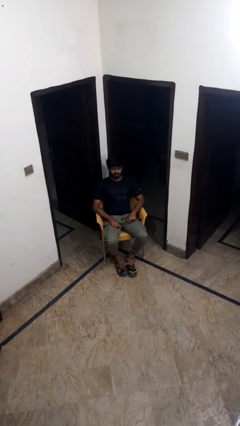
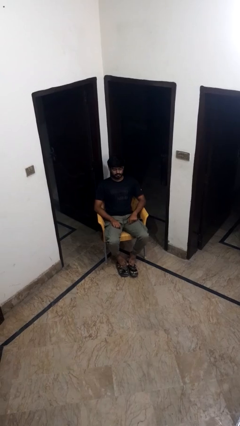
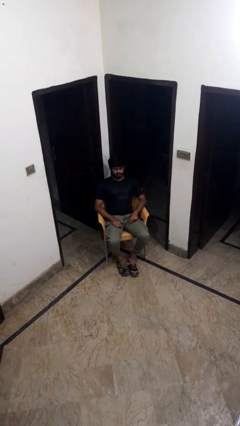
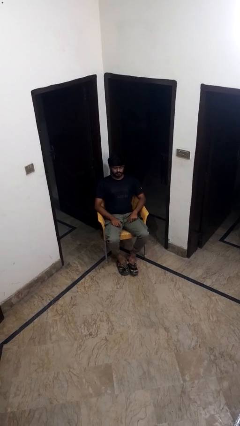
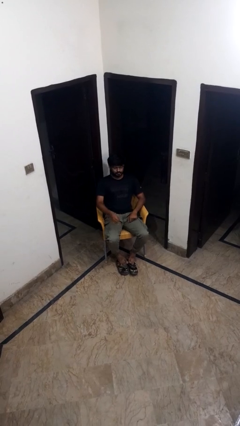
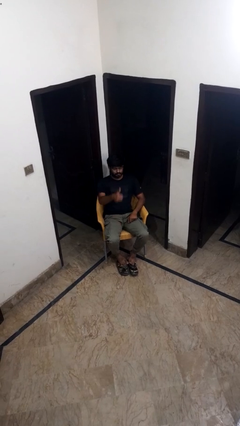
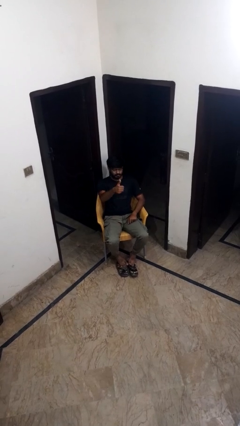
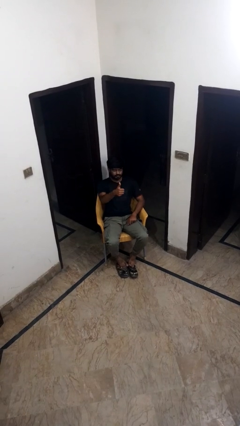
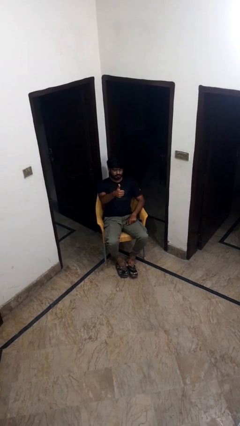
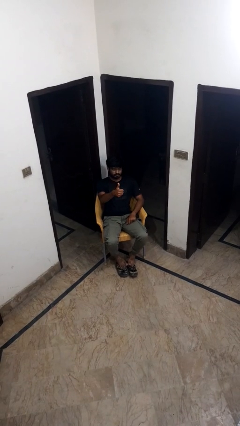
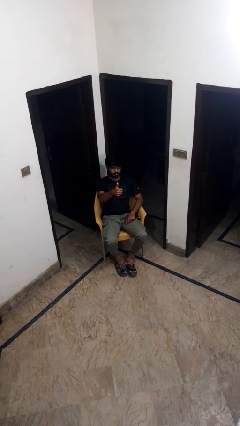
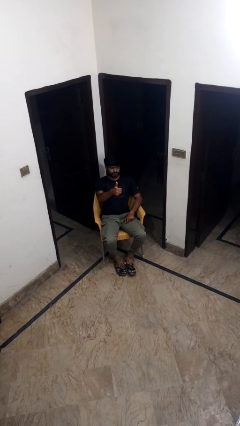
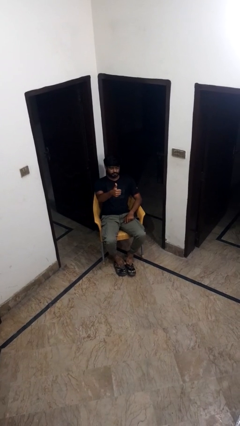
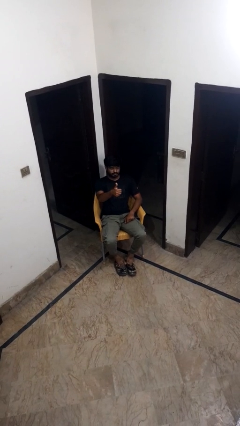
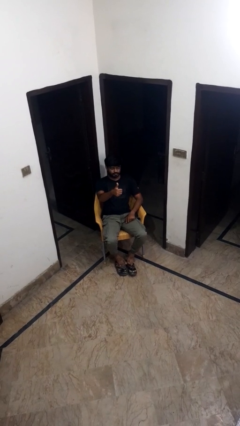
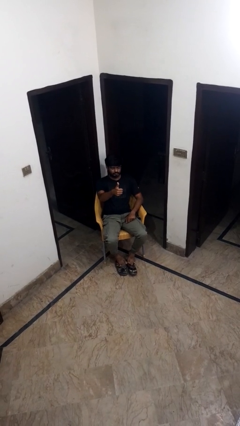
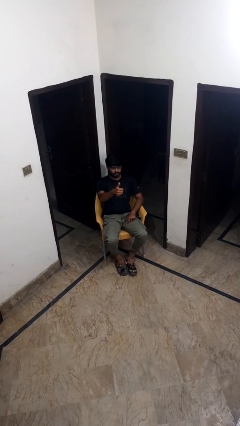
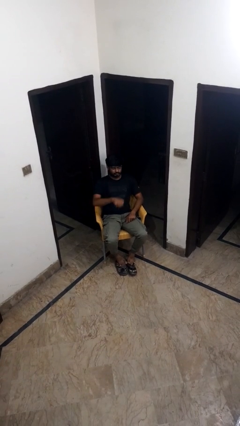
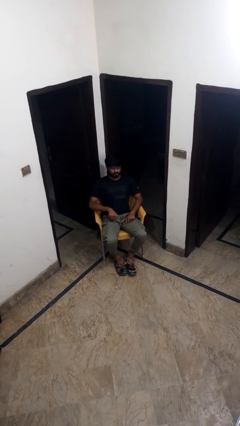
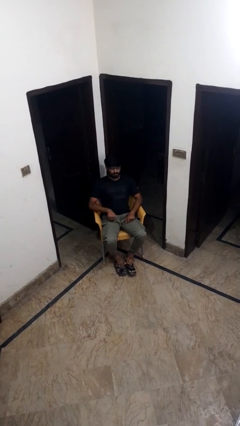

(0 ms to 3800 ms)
person gestures thumbs up

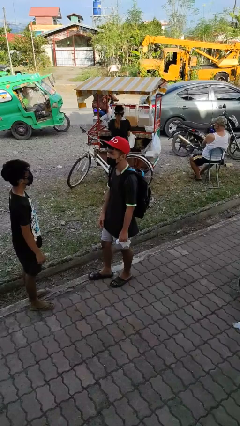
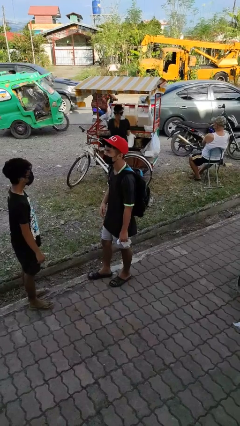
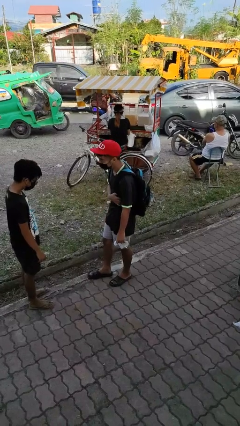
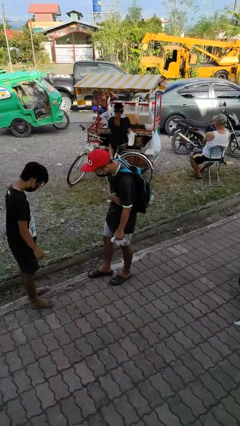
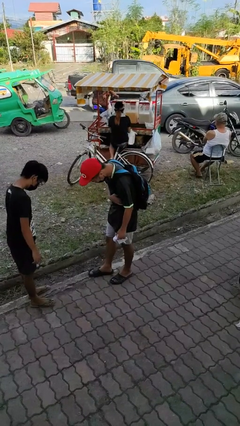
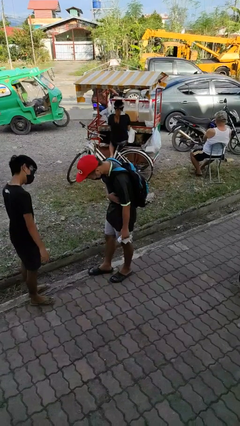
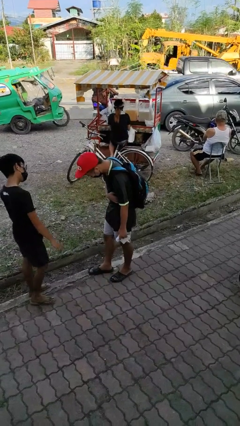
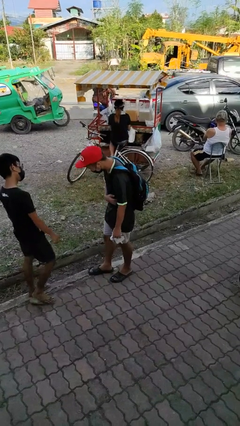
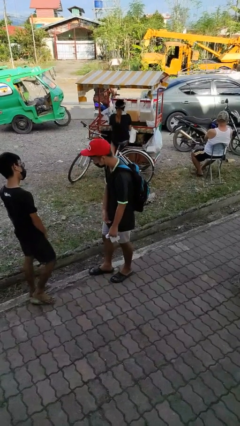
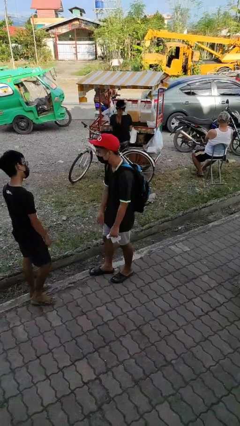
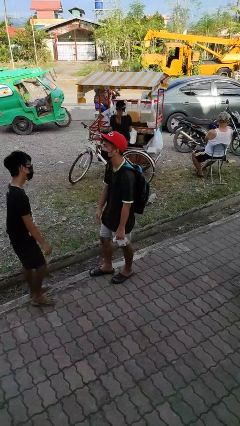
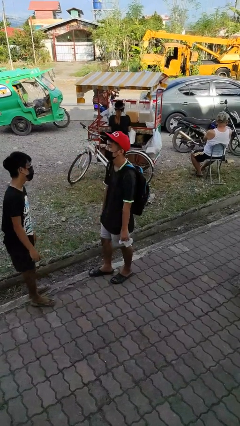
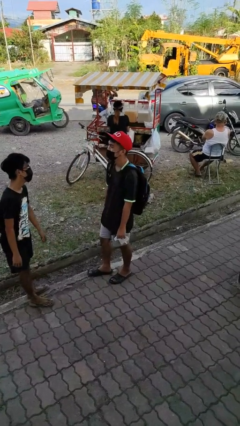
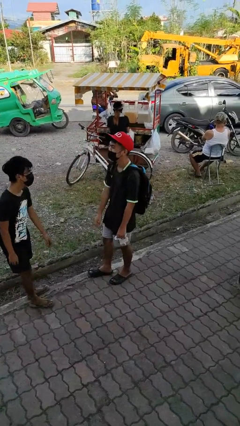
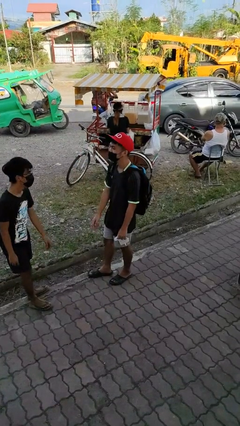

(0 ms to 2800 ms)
person laughs with person

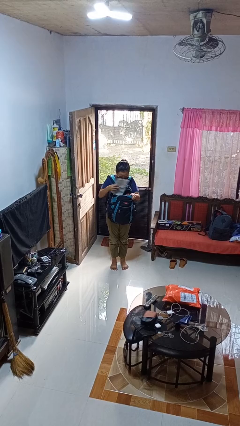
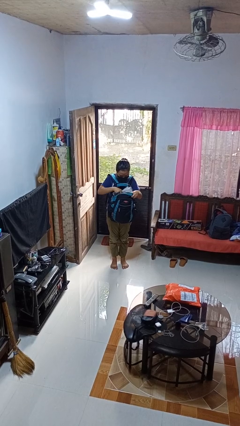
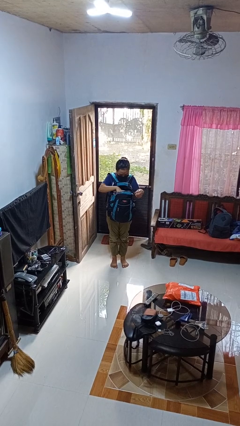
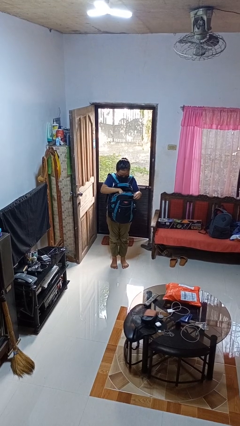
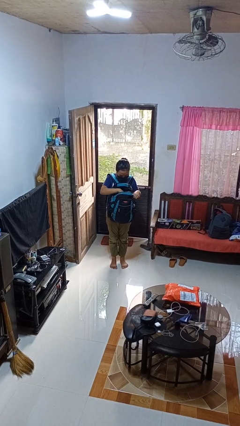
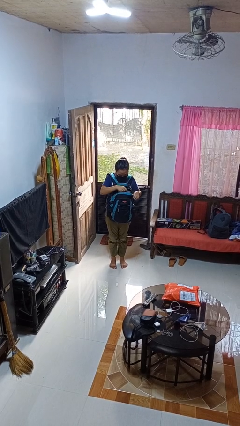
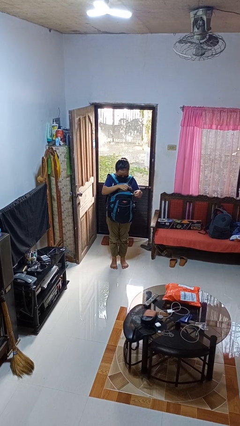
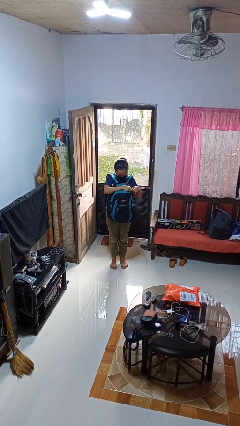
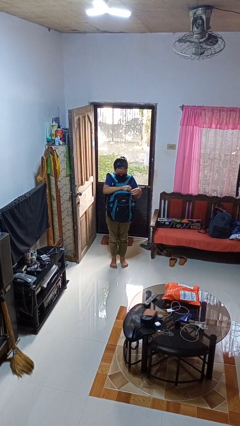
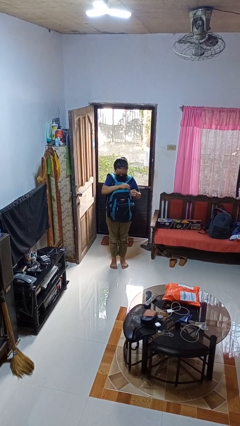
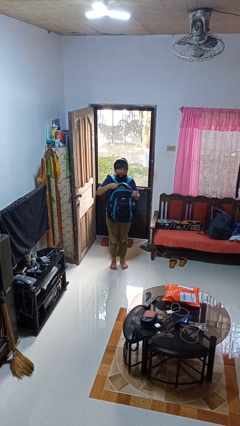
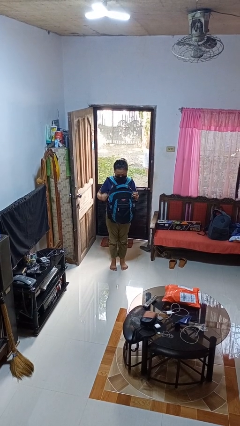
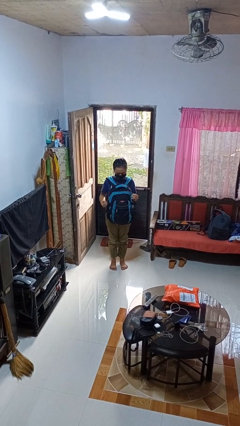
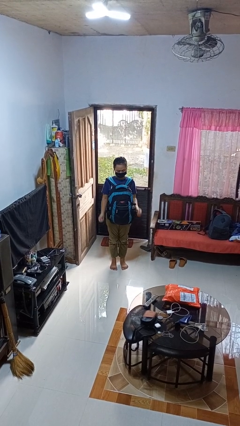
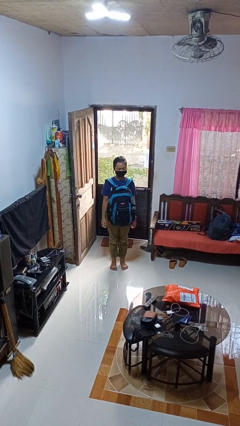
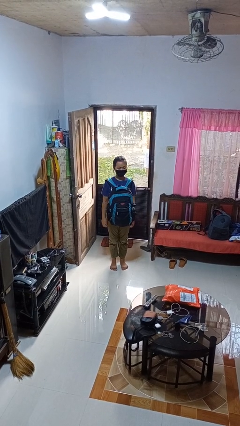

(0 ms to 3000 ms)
person puts object into backpack

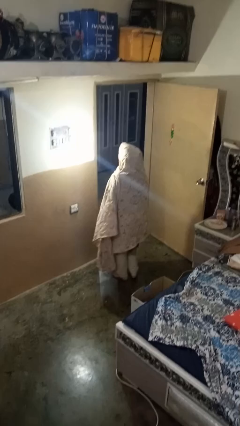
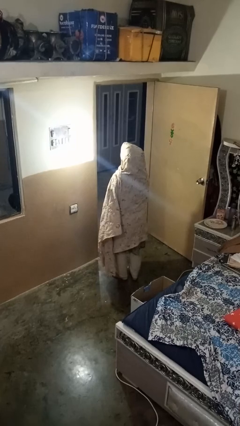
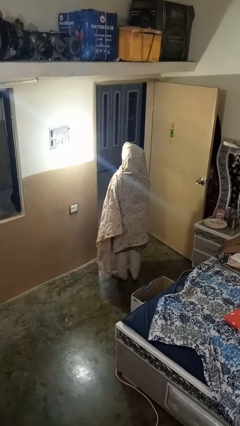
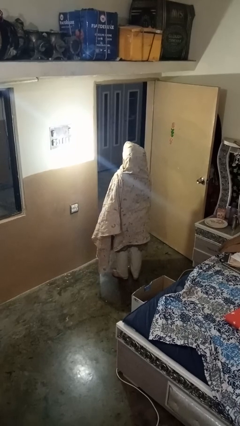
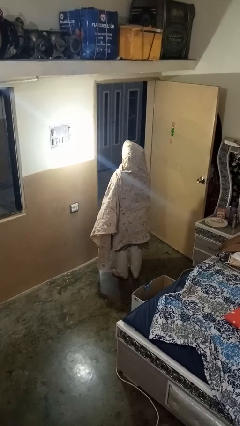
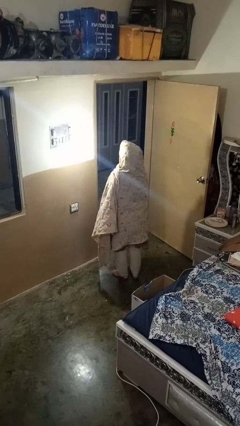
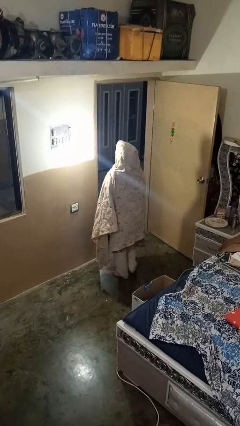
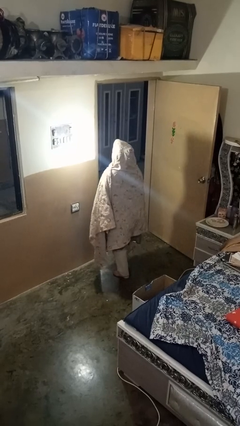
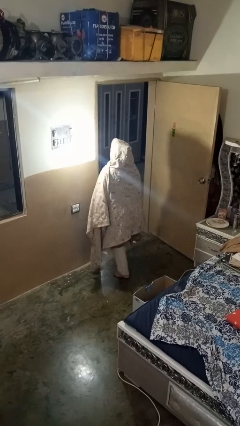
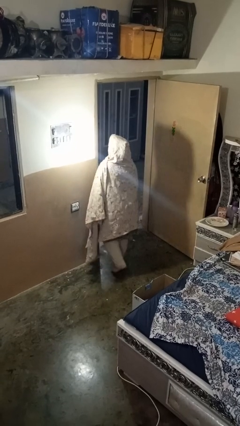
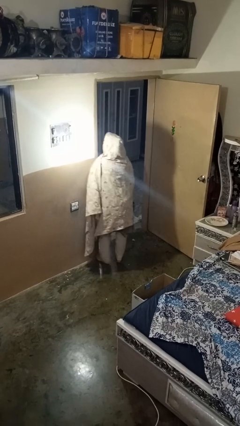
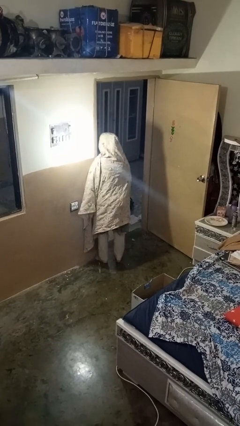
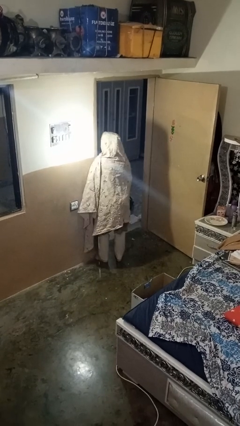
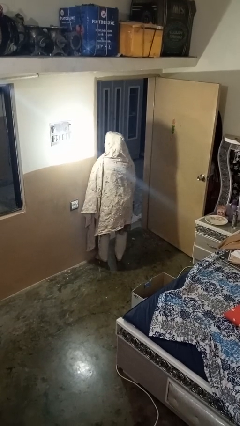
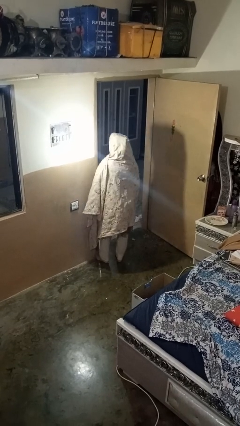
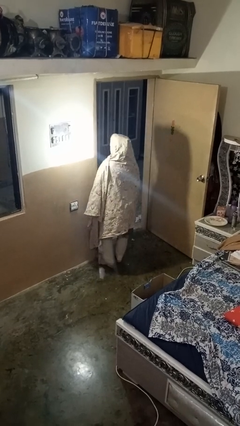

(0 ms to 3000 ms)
person bumps into wall

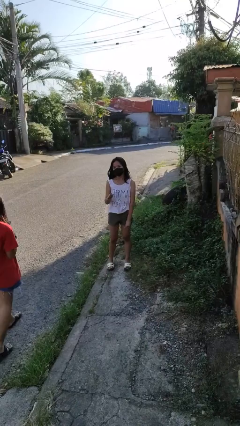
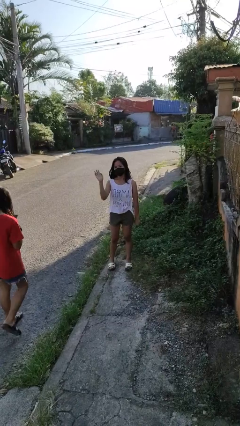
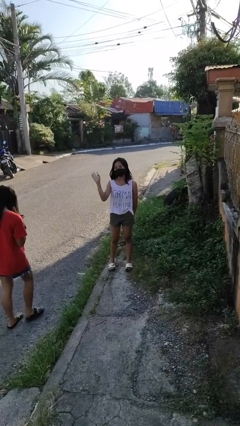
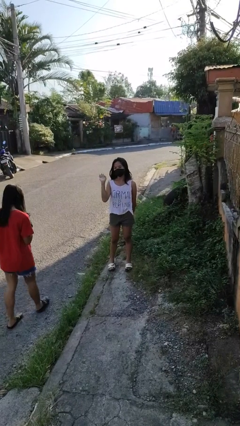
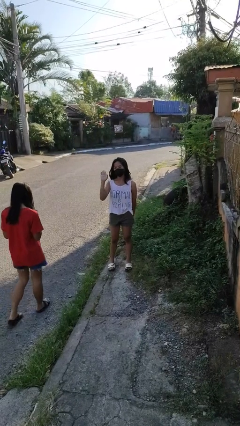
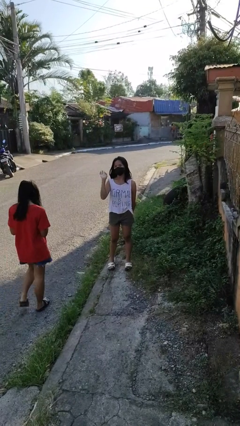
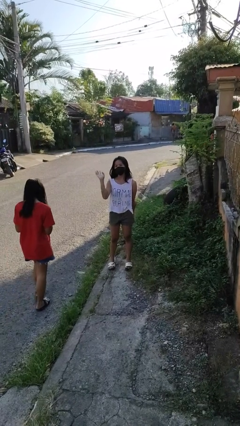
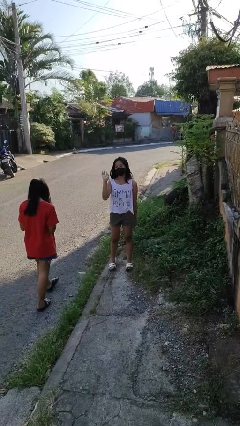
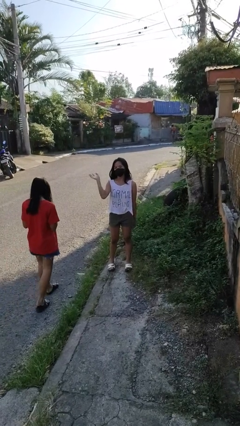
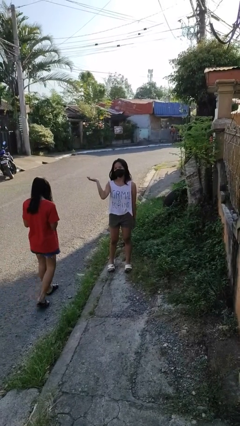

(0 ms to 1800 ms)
person waves at person

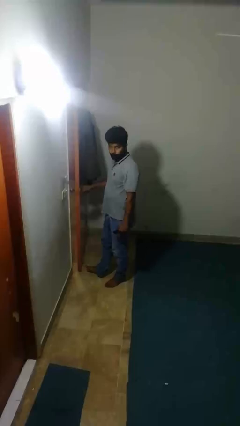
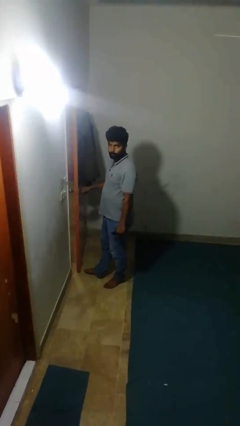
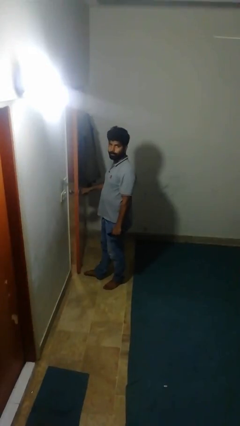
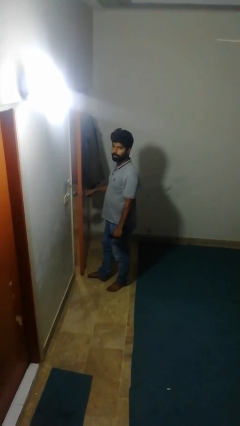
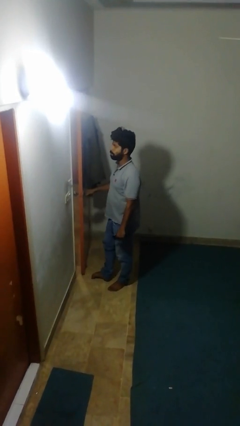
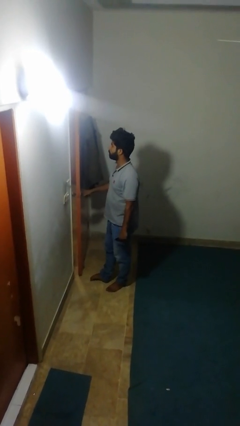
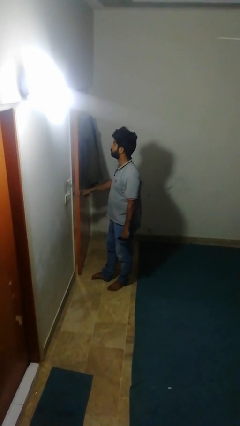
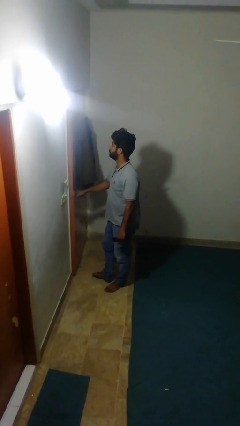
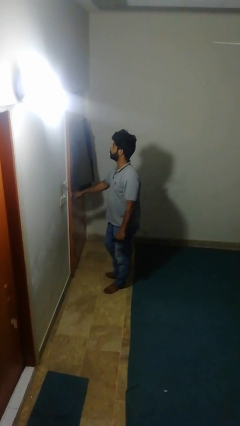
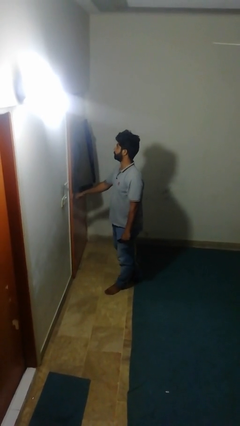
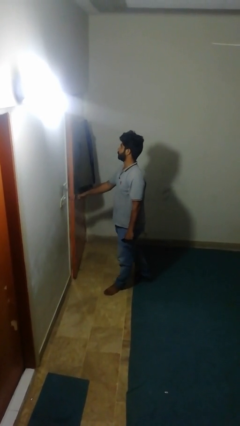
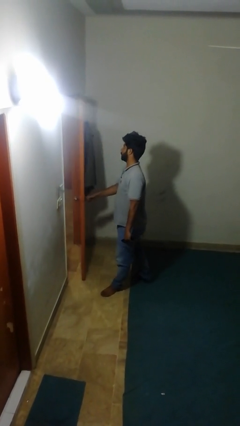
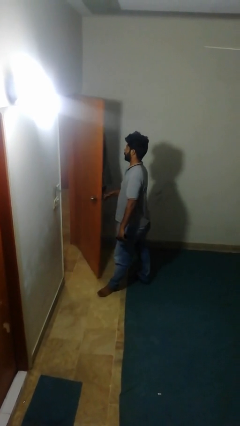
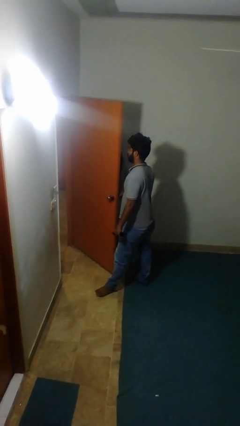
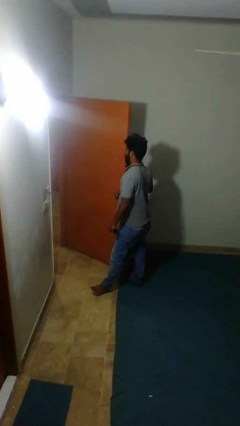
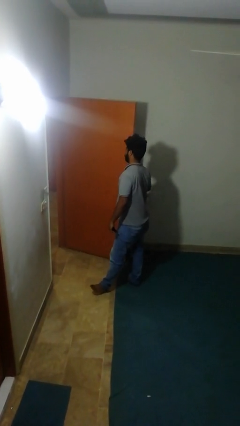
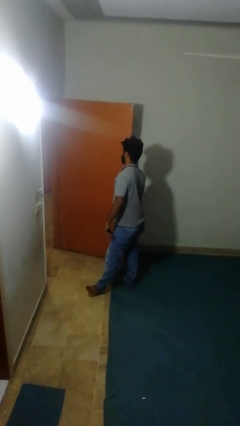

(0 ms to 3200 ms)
person opens facility door
